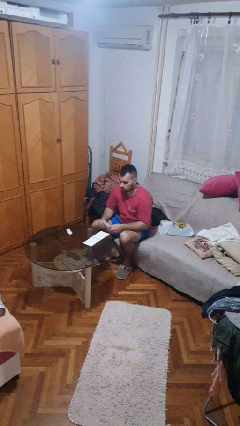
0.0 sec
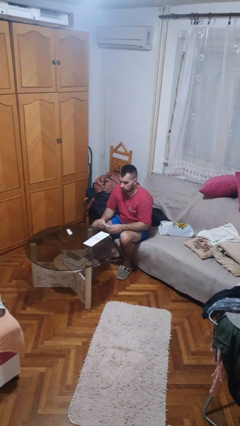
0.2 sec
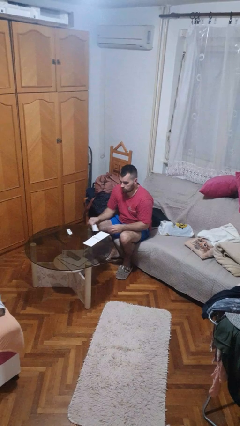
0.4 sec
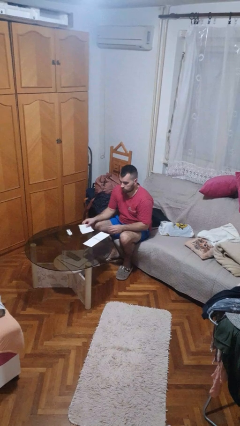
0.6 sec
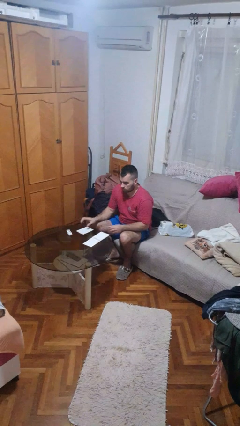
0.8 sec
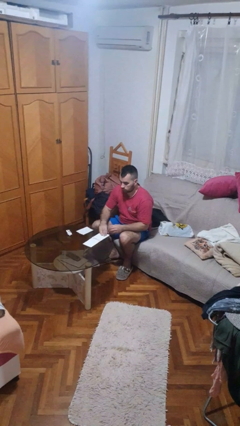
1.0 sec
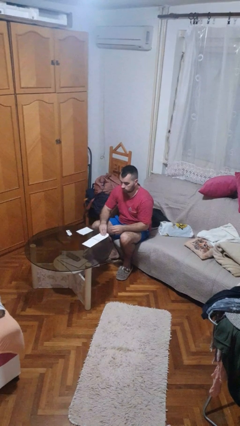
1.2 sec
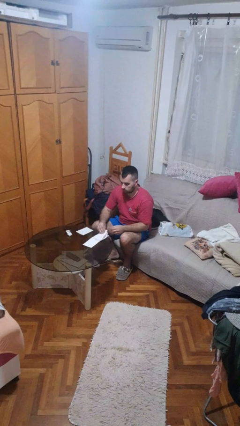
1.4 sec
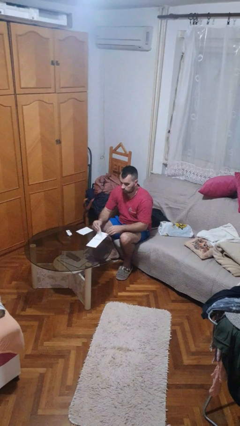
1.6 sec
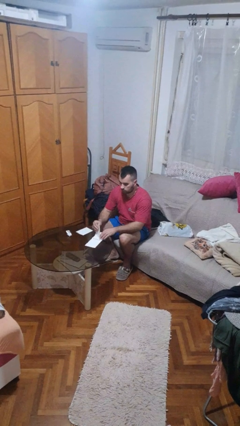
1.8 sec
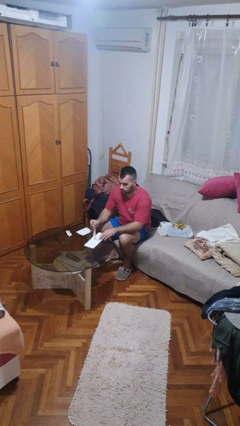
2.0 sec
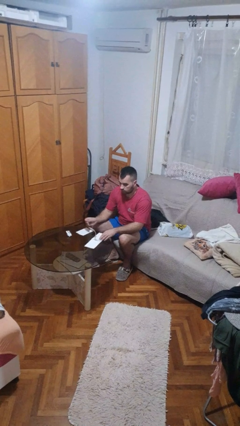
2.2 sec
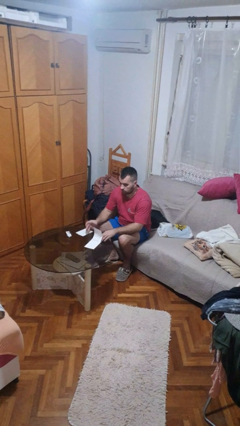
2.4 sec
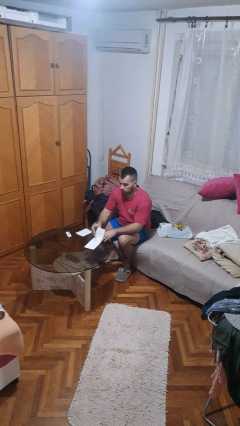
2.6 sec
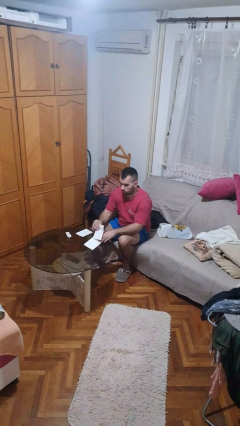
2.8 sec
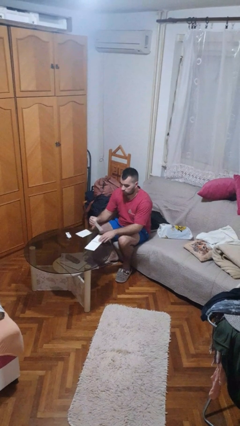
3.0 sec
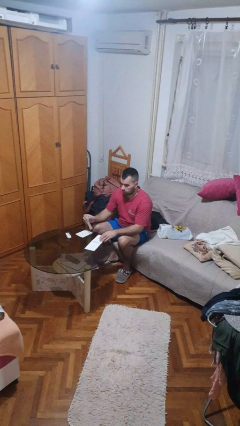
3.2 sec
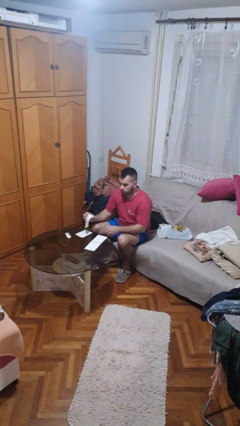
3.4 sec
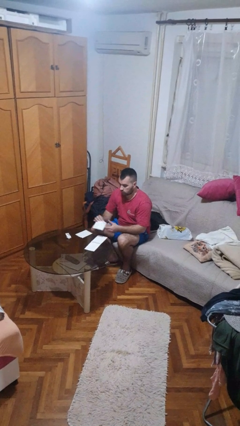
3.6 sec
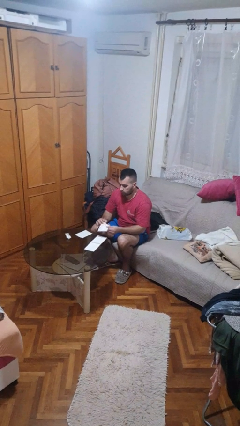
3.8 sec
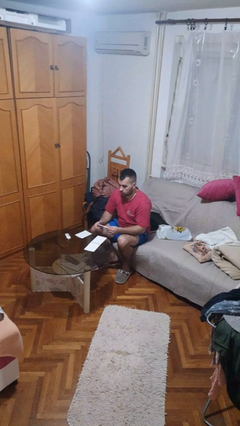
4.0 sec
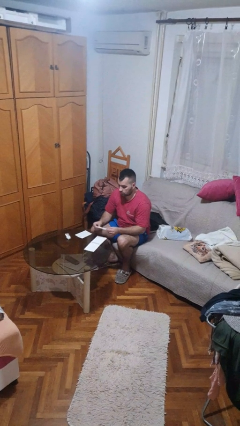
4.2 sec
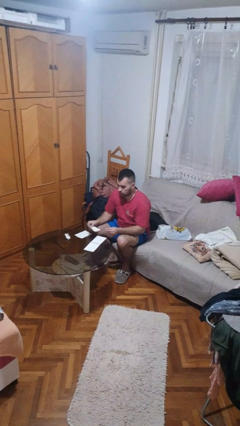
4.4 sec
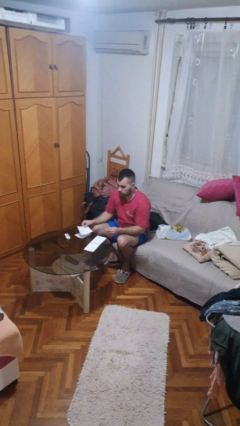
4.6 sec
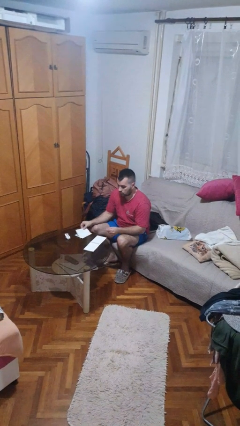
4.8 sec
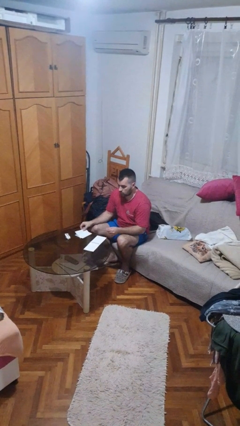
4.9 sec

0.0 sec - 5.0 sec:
person tears paper

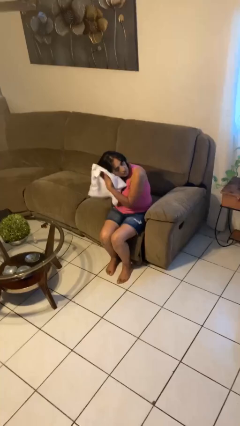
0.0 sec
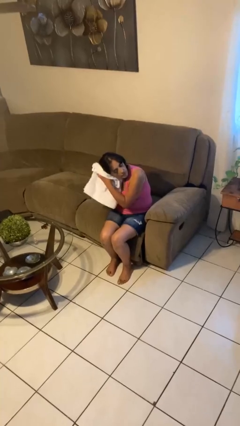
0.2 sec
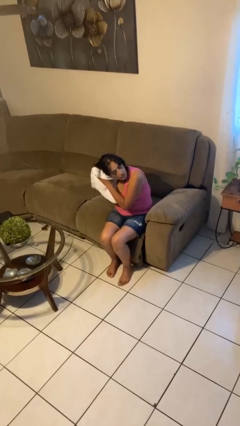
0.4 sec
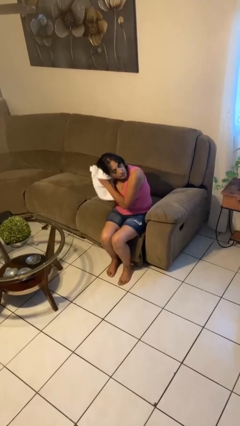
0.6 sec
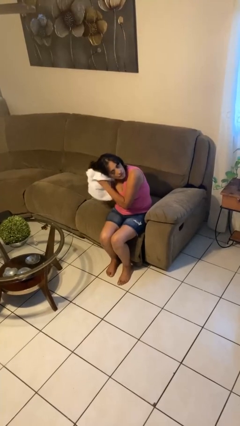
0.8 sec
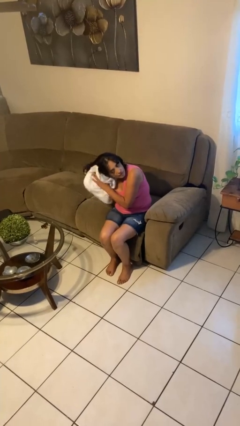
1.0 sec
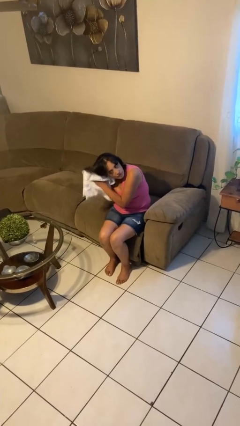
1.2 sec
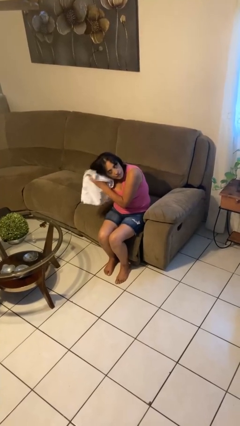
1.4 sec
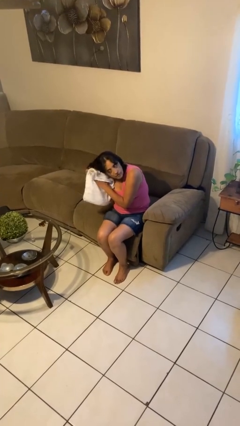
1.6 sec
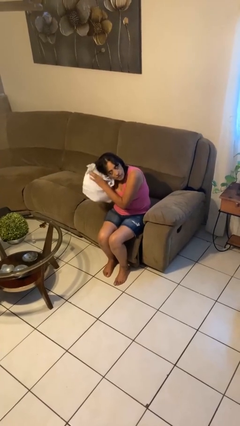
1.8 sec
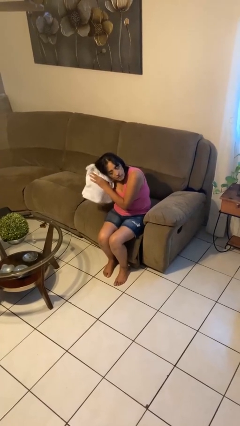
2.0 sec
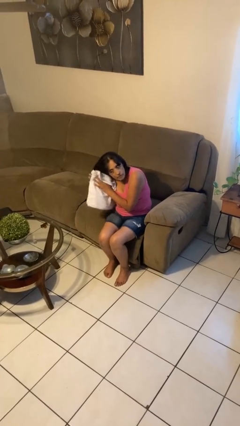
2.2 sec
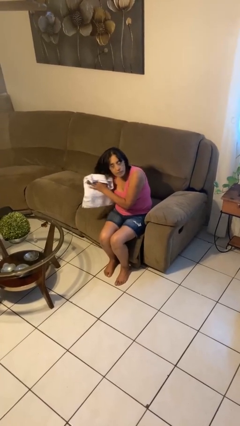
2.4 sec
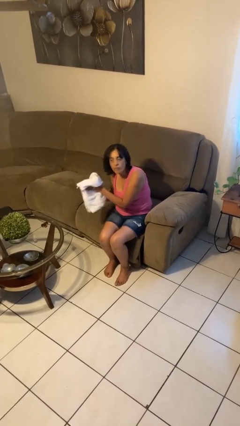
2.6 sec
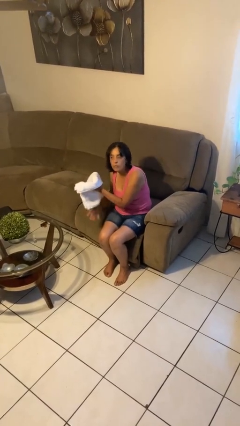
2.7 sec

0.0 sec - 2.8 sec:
person dries hair with towel

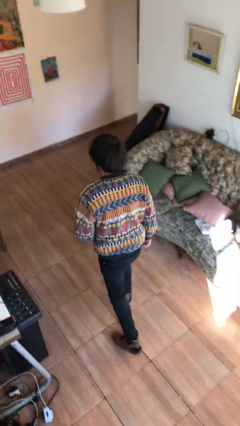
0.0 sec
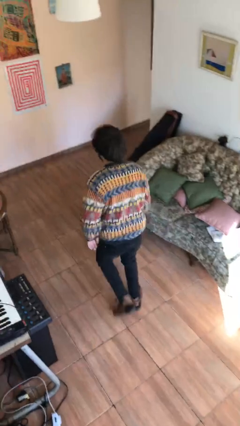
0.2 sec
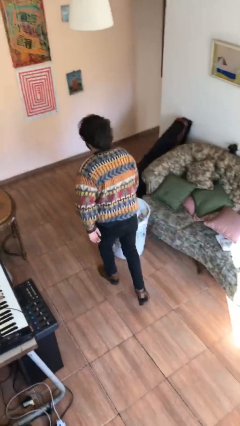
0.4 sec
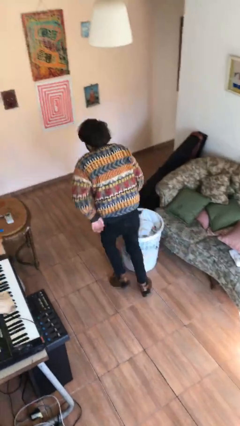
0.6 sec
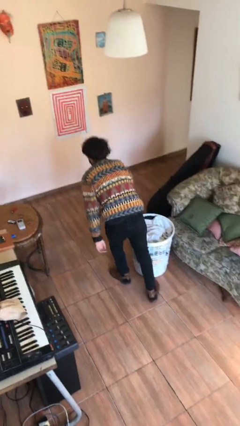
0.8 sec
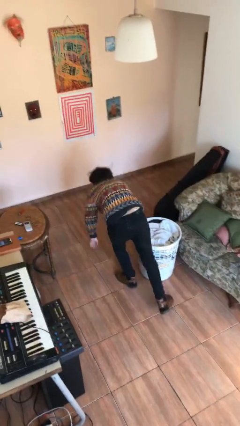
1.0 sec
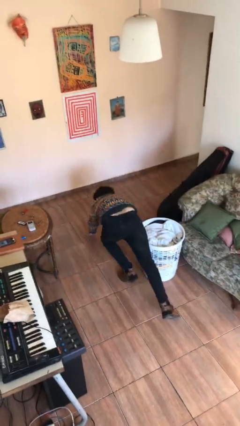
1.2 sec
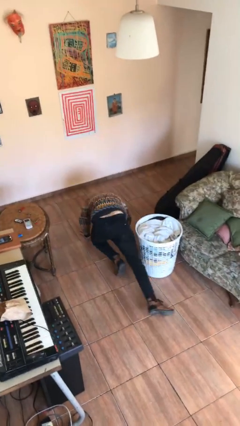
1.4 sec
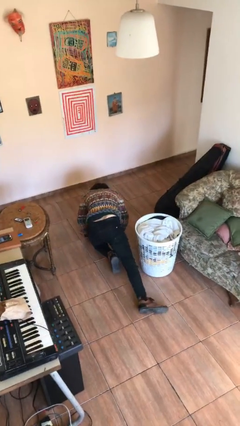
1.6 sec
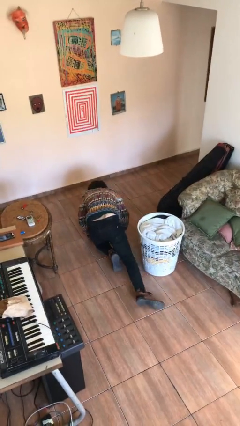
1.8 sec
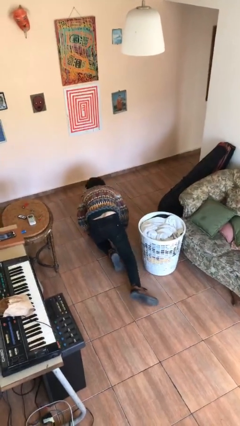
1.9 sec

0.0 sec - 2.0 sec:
person trips on object on floor

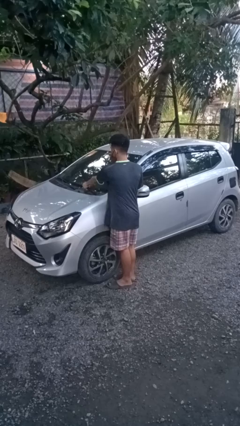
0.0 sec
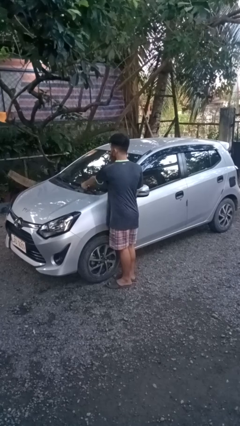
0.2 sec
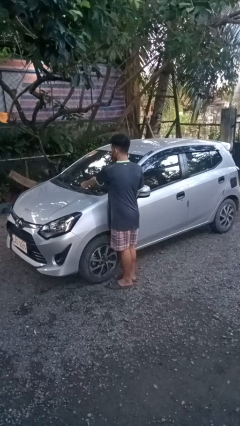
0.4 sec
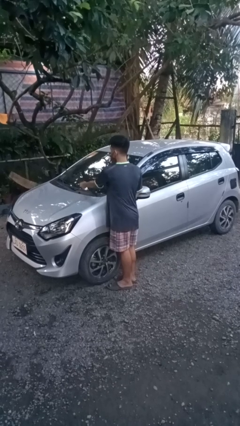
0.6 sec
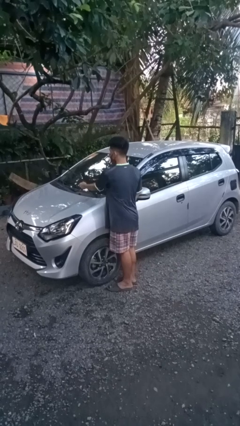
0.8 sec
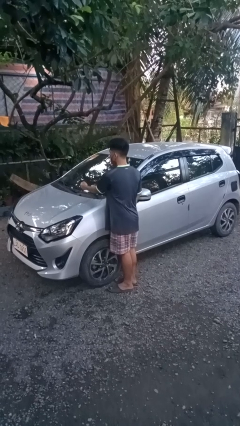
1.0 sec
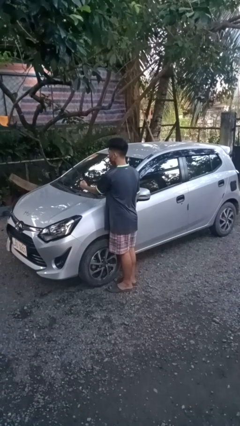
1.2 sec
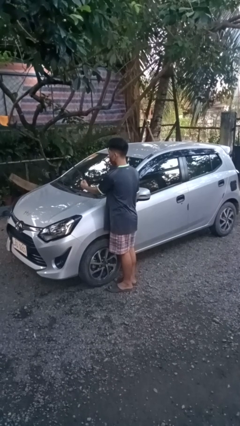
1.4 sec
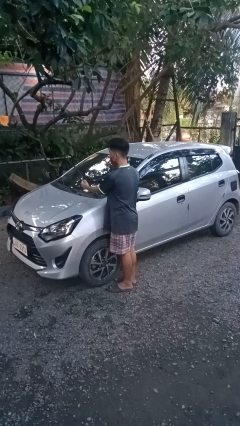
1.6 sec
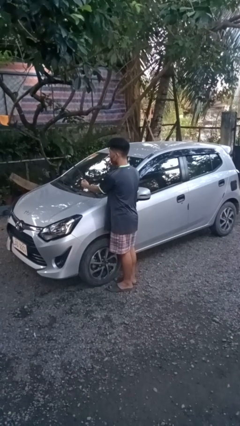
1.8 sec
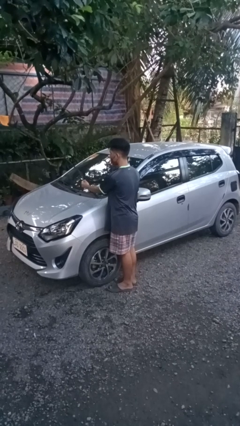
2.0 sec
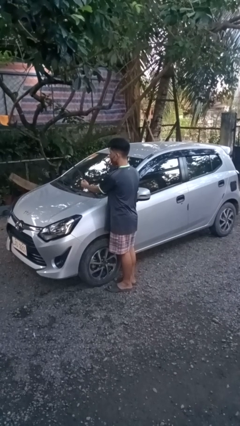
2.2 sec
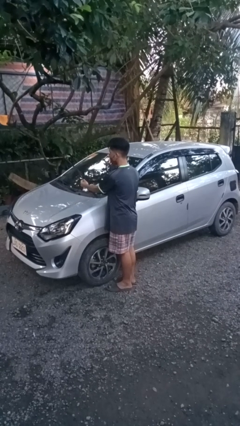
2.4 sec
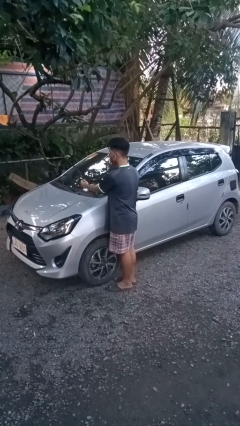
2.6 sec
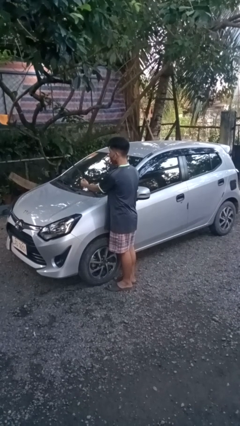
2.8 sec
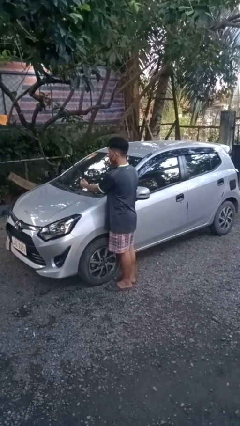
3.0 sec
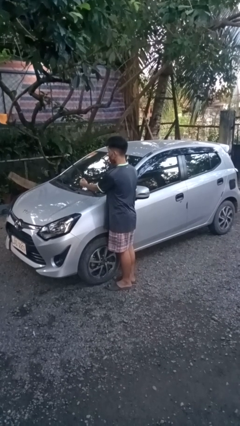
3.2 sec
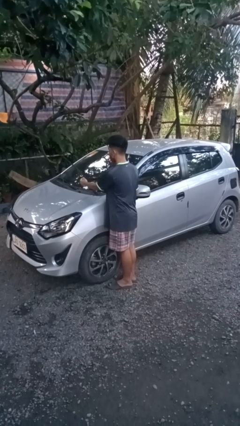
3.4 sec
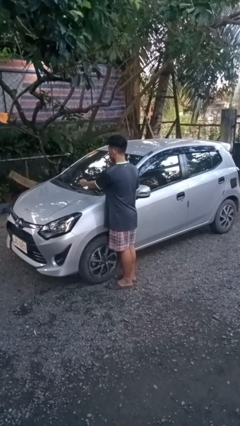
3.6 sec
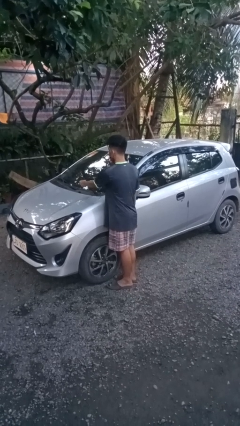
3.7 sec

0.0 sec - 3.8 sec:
person flips up car wipers

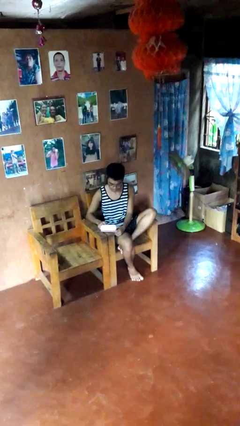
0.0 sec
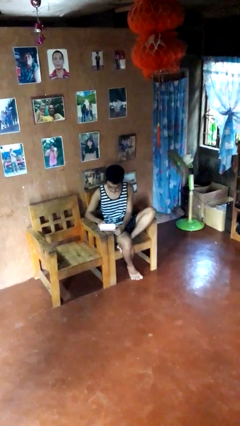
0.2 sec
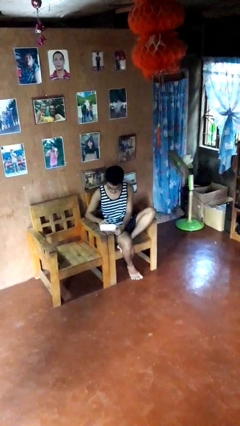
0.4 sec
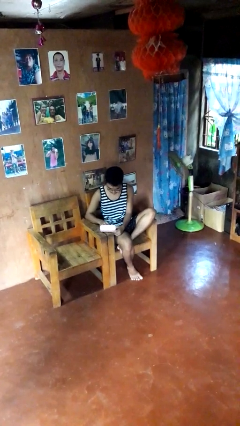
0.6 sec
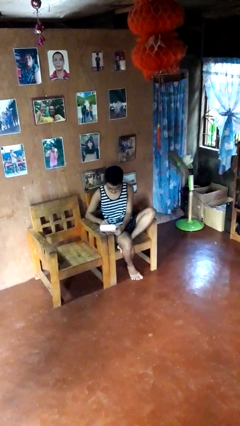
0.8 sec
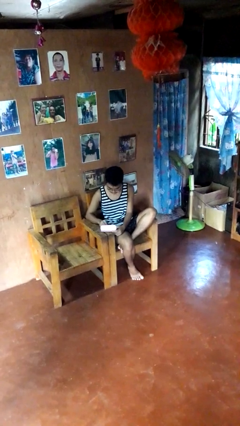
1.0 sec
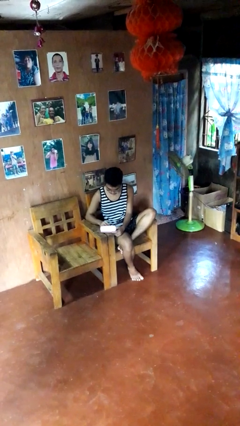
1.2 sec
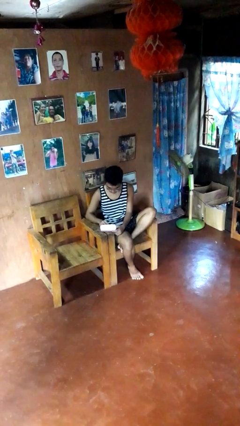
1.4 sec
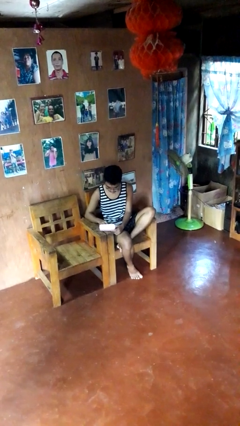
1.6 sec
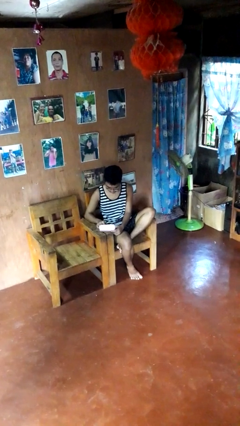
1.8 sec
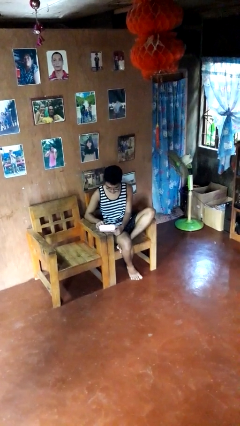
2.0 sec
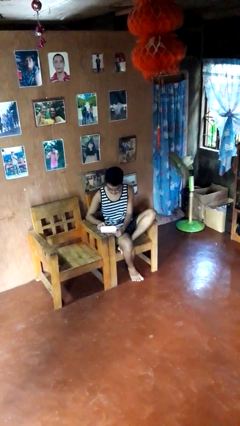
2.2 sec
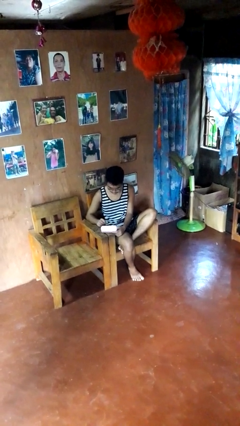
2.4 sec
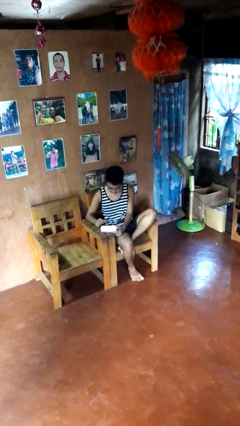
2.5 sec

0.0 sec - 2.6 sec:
person searches jewelry box

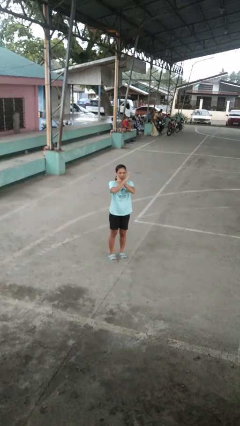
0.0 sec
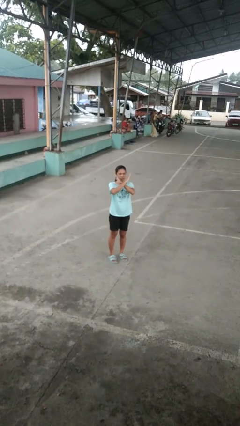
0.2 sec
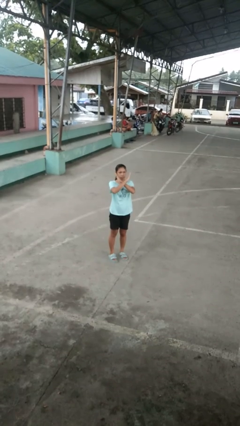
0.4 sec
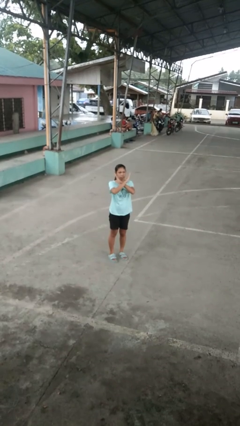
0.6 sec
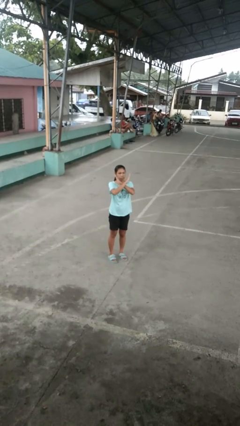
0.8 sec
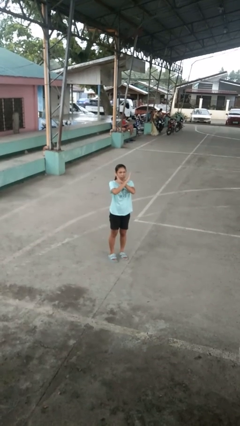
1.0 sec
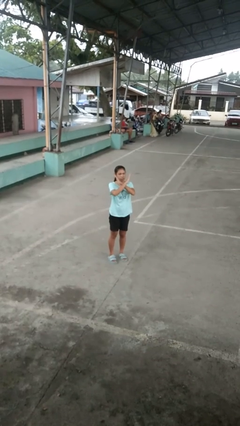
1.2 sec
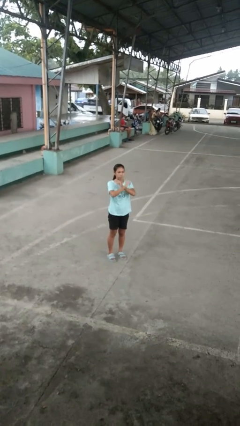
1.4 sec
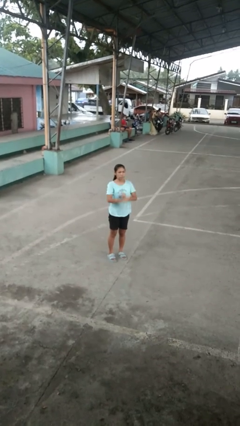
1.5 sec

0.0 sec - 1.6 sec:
person gestures arms x
